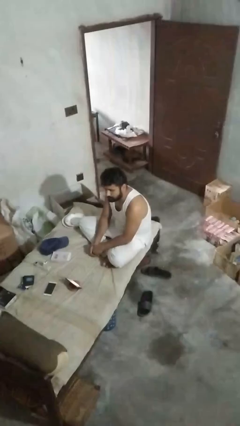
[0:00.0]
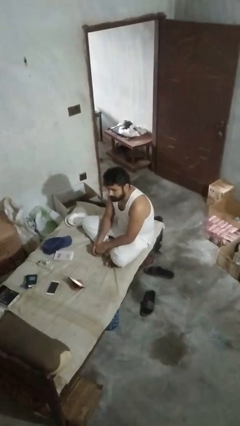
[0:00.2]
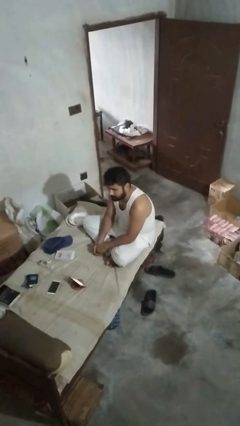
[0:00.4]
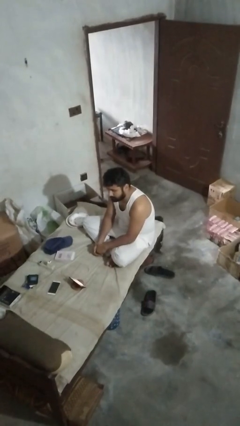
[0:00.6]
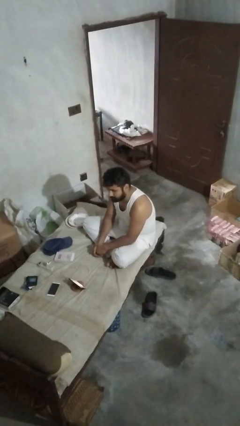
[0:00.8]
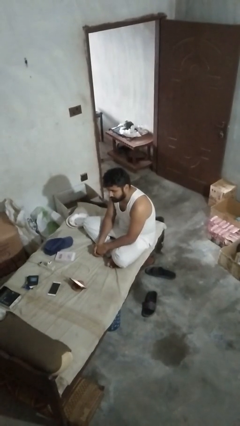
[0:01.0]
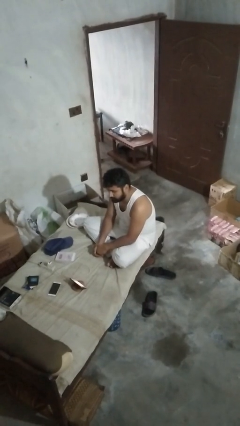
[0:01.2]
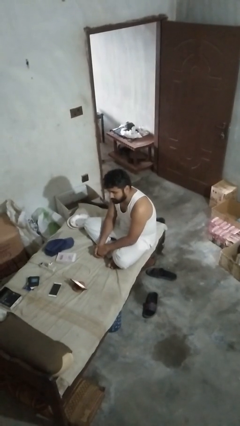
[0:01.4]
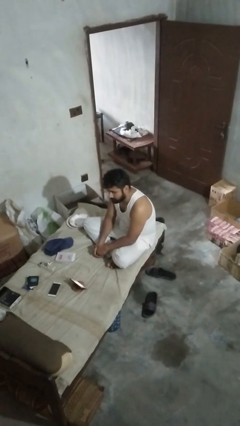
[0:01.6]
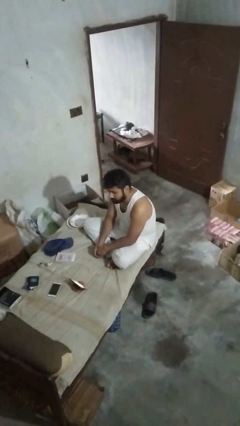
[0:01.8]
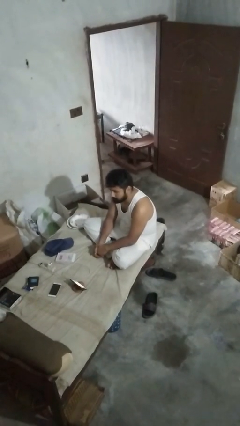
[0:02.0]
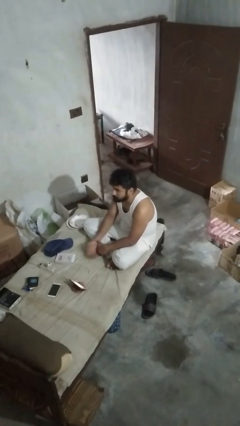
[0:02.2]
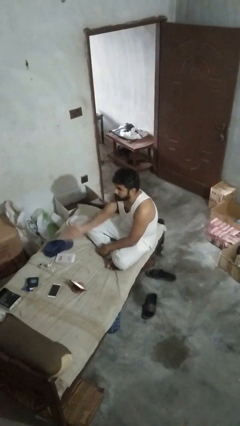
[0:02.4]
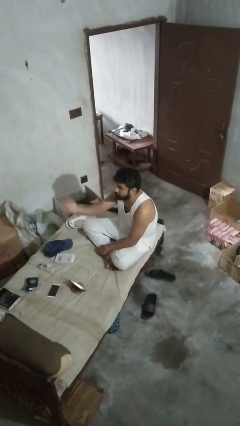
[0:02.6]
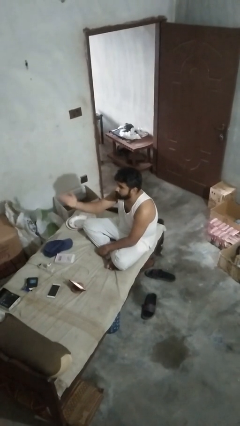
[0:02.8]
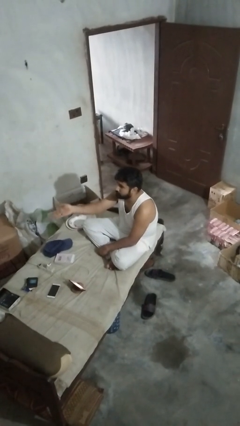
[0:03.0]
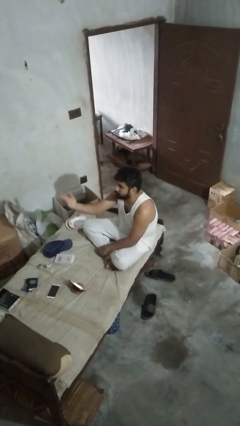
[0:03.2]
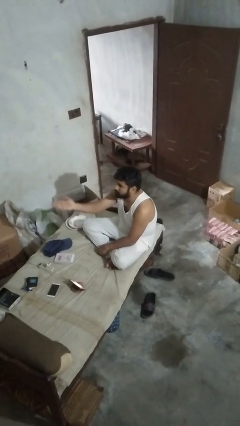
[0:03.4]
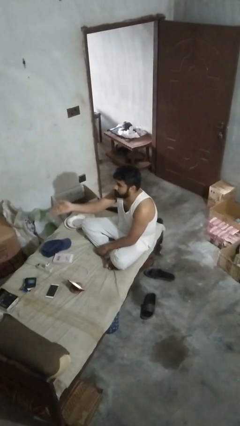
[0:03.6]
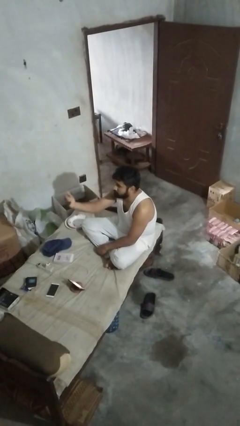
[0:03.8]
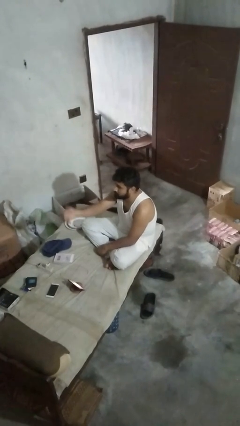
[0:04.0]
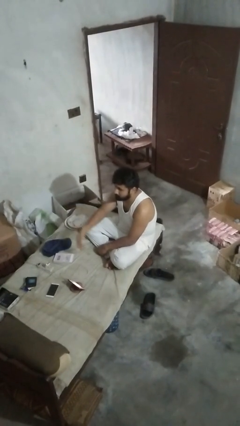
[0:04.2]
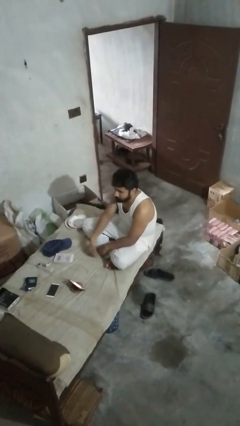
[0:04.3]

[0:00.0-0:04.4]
person gestures swipe up

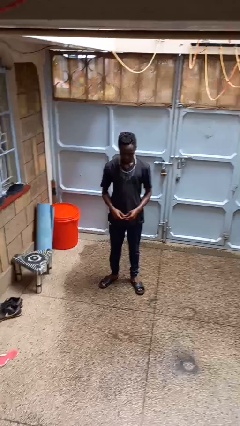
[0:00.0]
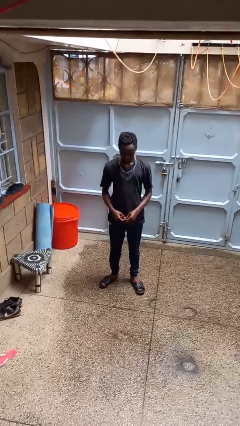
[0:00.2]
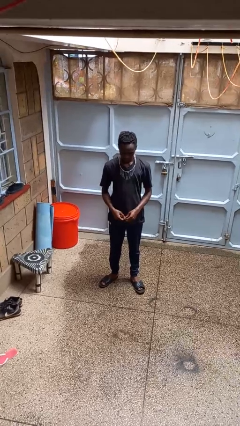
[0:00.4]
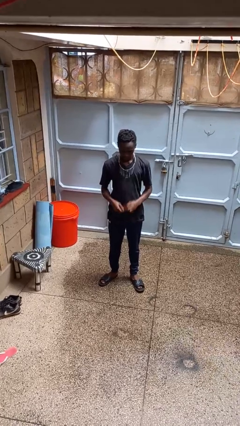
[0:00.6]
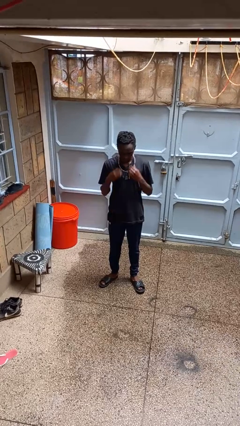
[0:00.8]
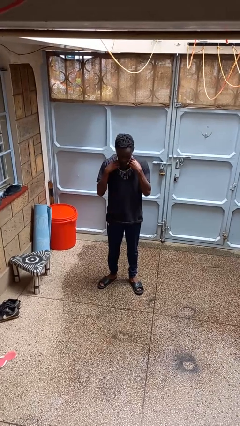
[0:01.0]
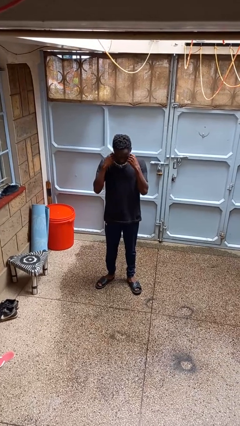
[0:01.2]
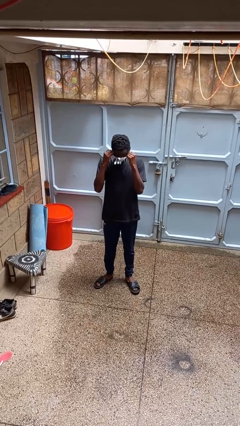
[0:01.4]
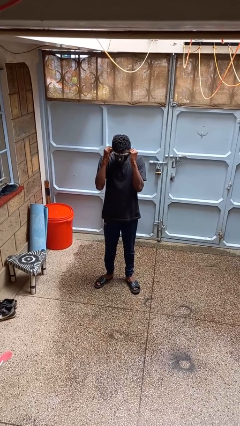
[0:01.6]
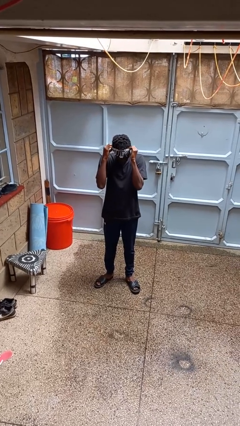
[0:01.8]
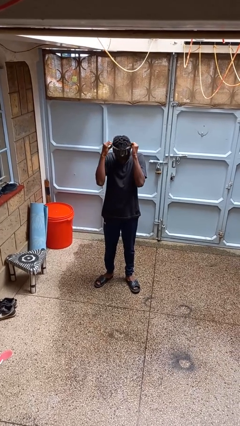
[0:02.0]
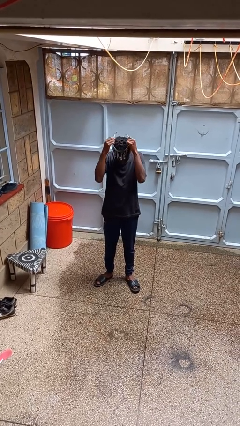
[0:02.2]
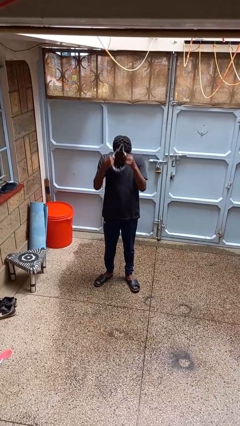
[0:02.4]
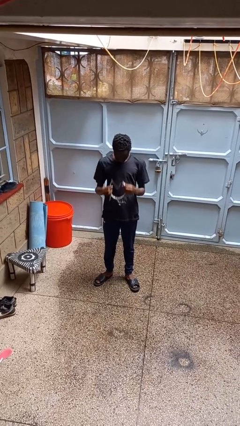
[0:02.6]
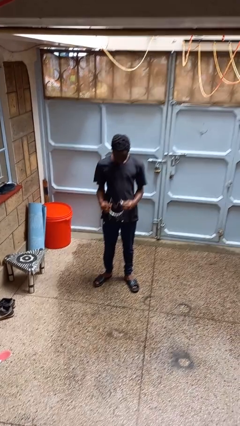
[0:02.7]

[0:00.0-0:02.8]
person takes off necklace

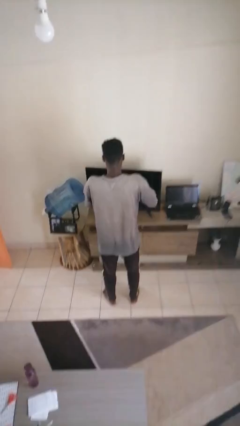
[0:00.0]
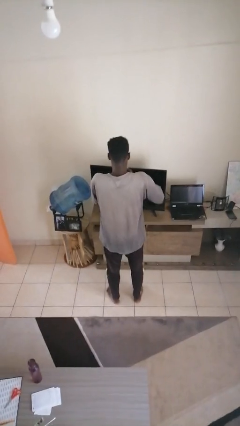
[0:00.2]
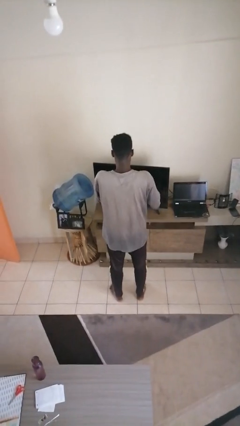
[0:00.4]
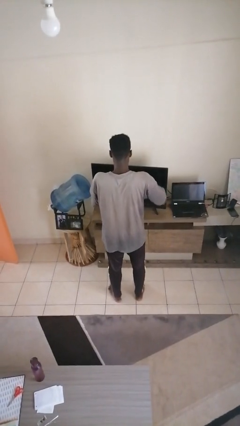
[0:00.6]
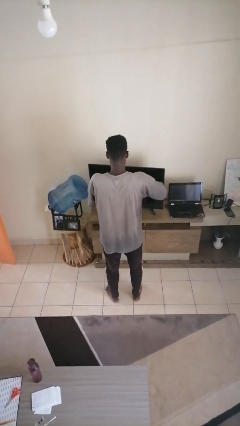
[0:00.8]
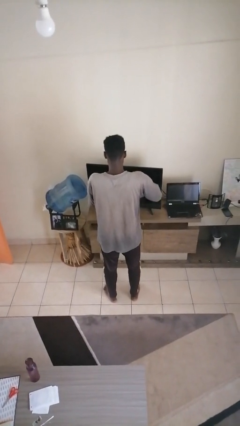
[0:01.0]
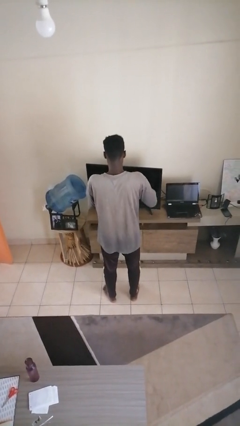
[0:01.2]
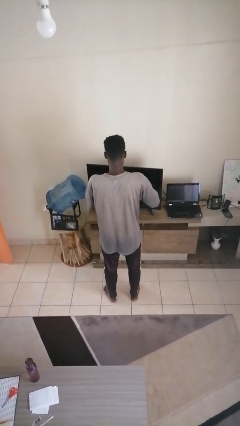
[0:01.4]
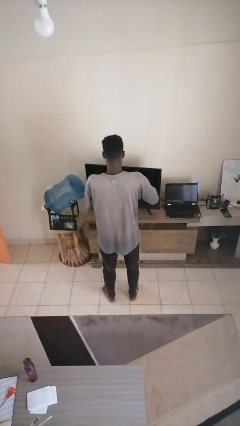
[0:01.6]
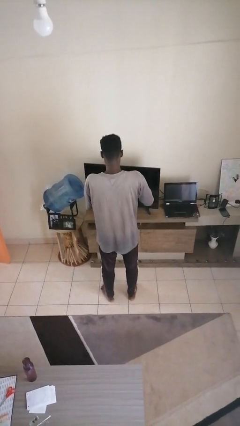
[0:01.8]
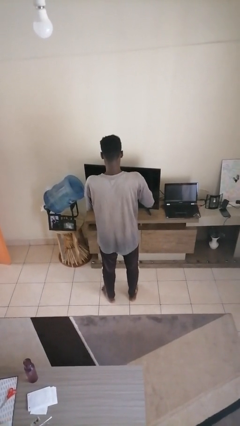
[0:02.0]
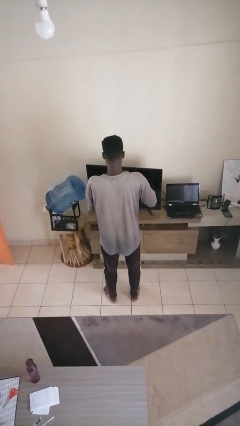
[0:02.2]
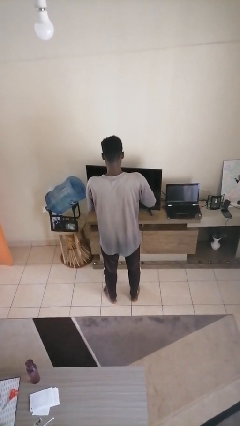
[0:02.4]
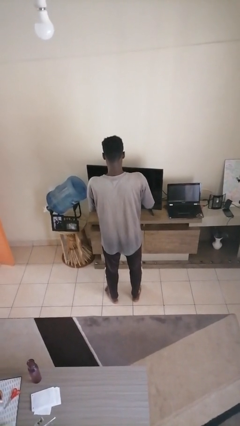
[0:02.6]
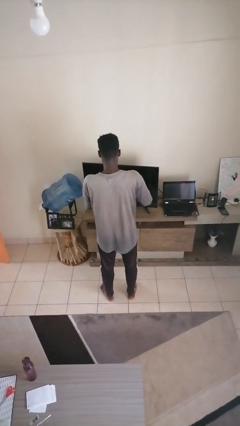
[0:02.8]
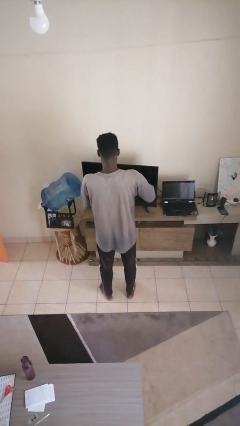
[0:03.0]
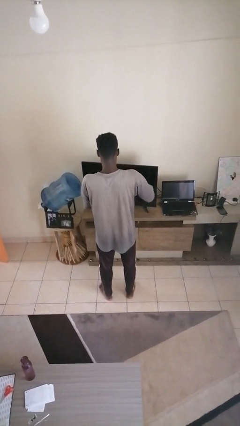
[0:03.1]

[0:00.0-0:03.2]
person cracks knuckles

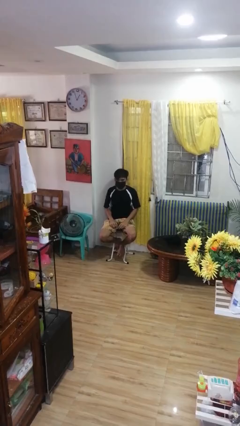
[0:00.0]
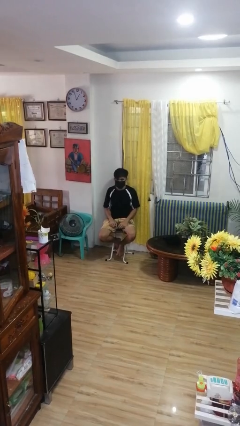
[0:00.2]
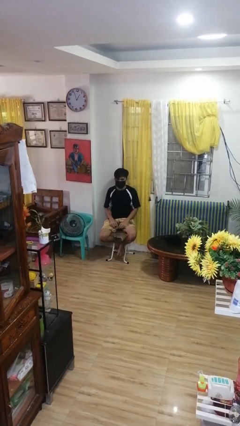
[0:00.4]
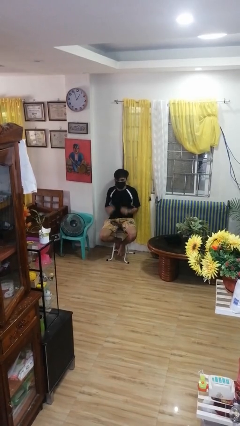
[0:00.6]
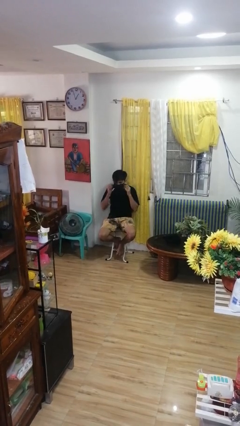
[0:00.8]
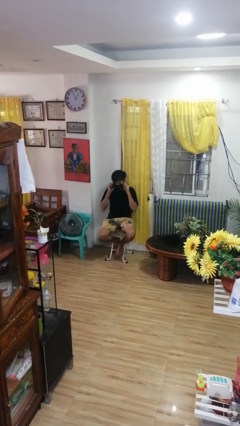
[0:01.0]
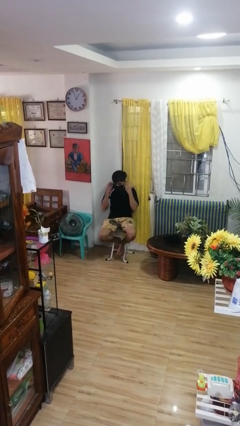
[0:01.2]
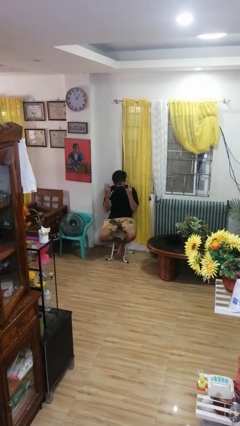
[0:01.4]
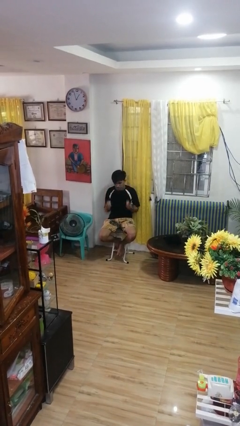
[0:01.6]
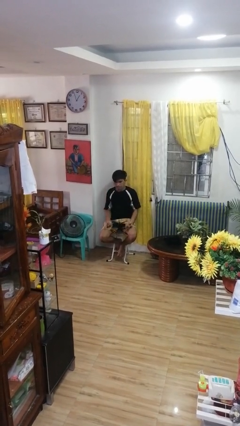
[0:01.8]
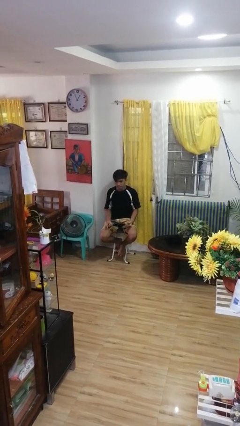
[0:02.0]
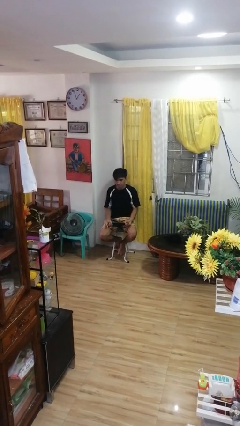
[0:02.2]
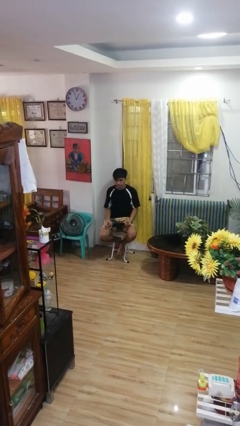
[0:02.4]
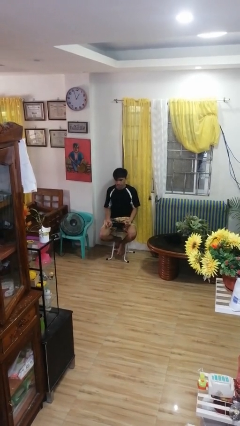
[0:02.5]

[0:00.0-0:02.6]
person takes off facemask

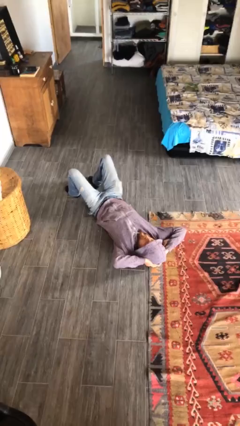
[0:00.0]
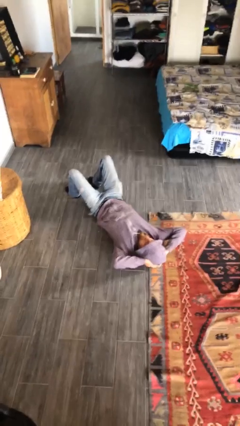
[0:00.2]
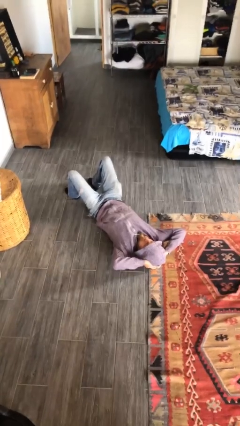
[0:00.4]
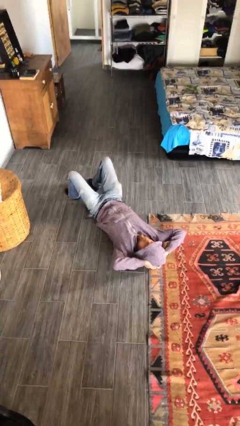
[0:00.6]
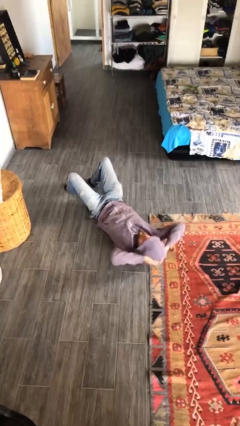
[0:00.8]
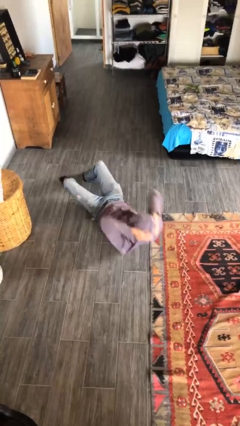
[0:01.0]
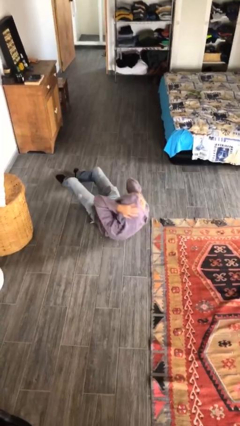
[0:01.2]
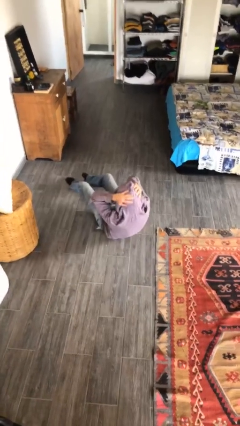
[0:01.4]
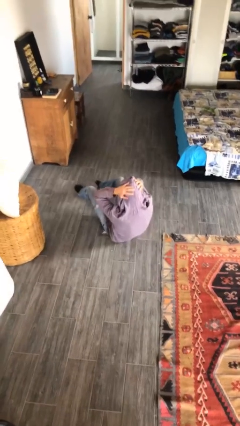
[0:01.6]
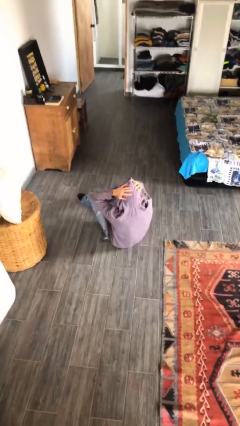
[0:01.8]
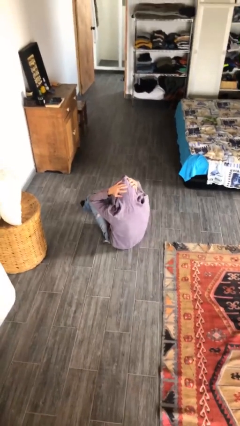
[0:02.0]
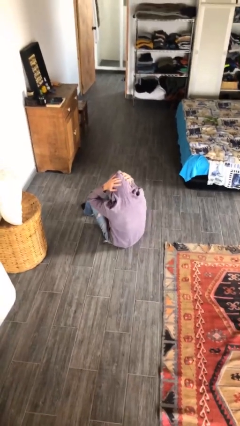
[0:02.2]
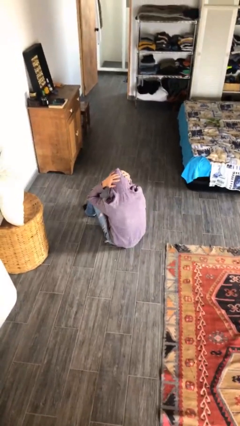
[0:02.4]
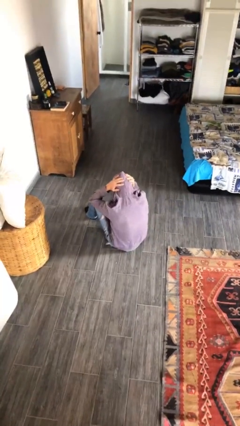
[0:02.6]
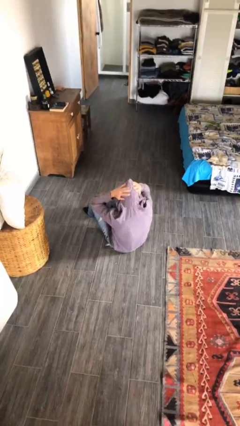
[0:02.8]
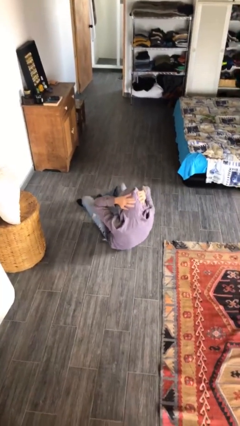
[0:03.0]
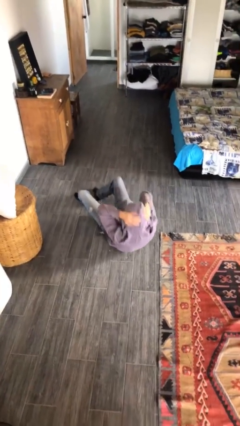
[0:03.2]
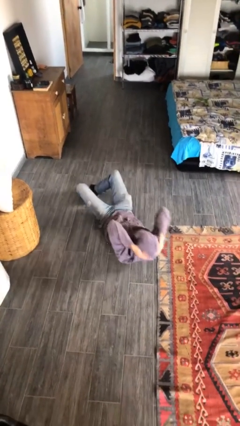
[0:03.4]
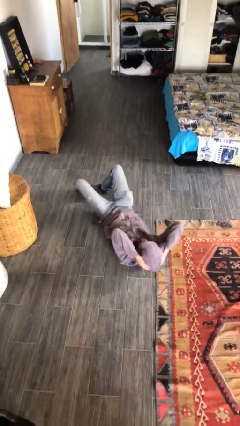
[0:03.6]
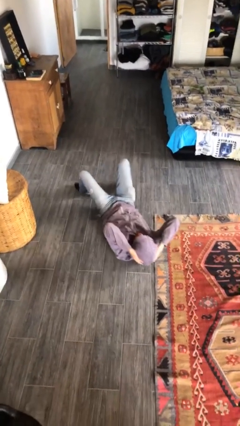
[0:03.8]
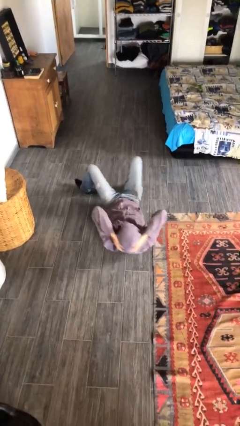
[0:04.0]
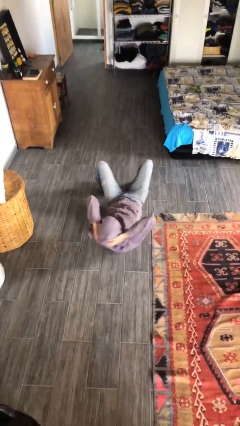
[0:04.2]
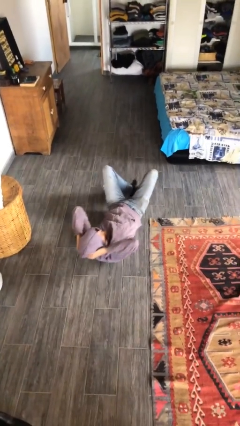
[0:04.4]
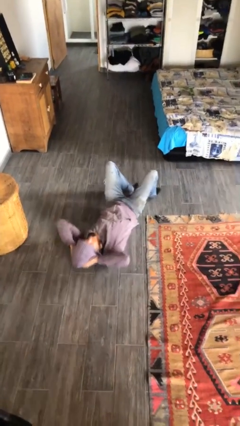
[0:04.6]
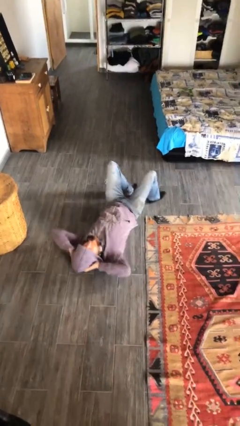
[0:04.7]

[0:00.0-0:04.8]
person exercises with situp
